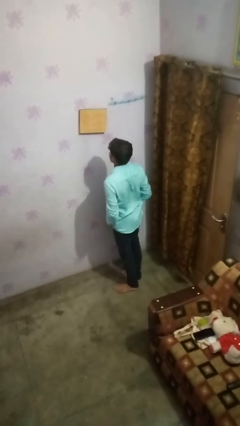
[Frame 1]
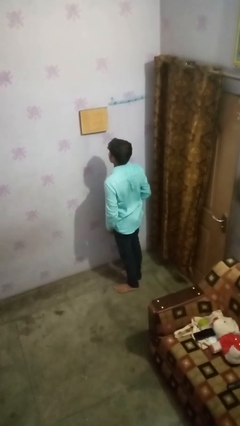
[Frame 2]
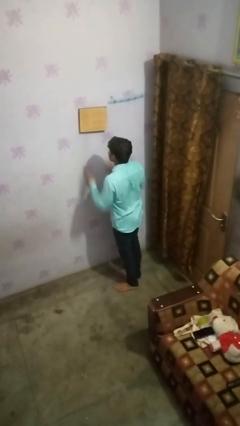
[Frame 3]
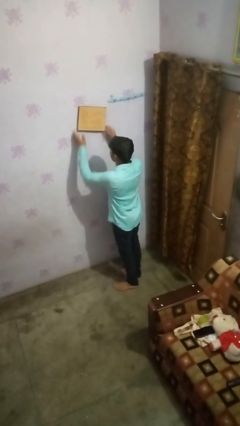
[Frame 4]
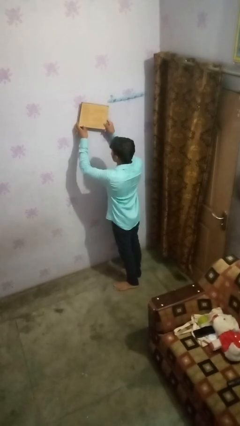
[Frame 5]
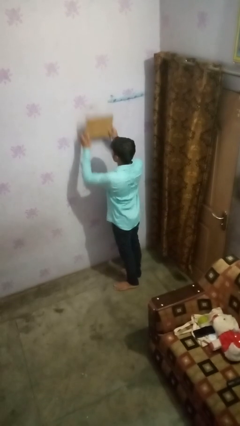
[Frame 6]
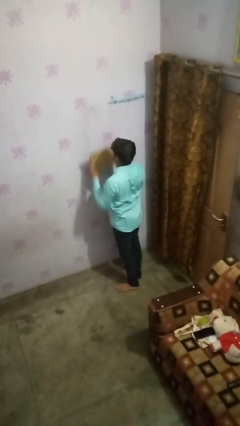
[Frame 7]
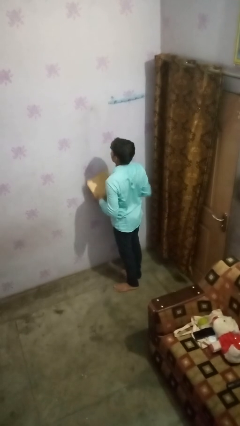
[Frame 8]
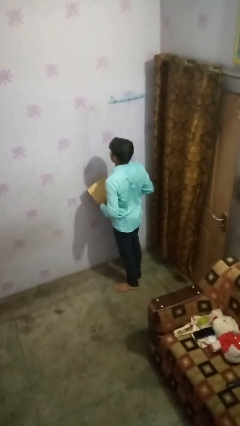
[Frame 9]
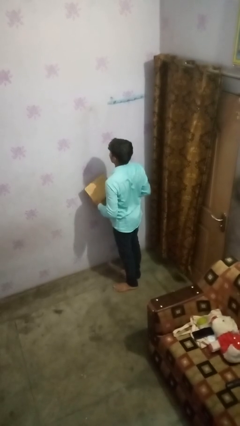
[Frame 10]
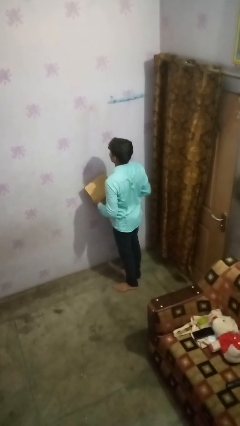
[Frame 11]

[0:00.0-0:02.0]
person takes down picture frame

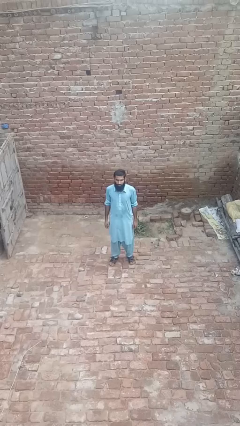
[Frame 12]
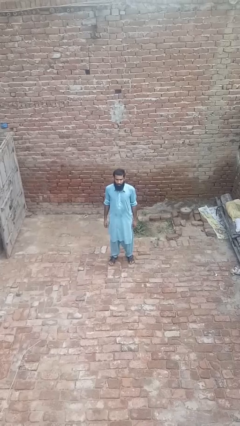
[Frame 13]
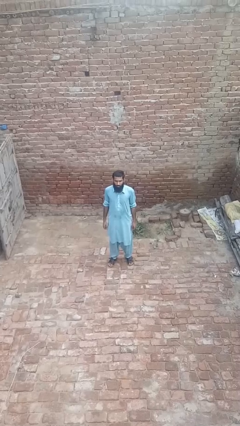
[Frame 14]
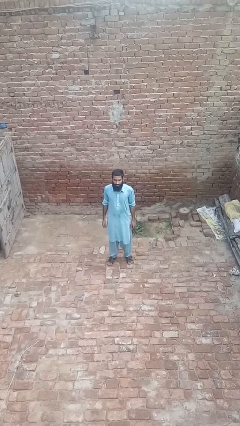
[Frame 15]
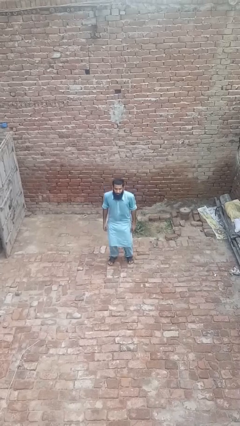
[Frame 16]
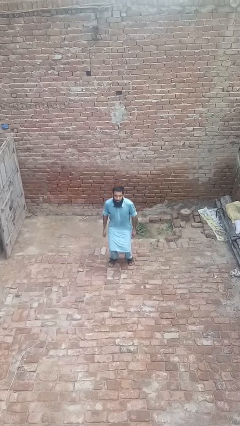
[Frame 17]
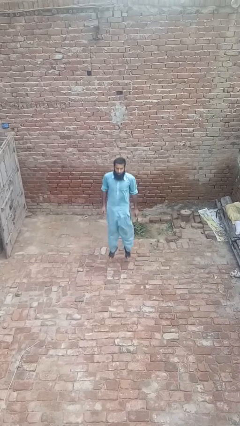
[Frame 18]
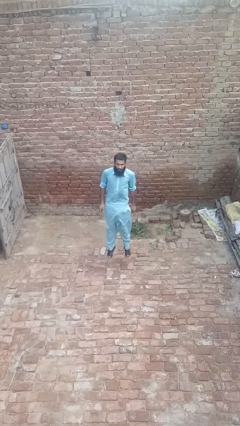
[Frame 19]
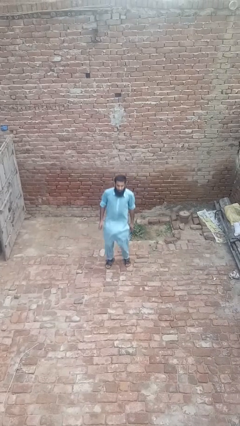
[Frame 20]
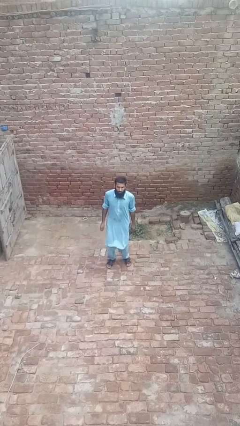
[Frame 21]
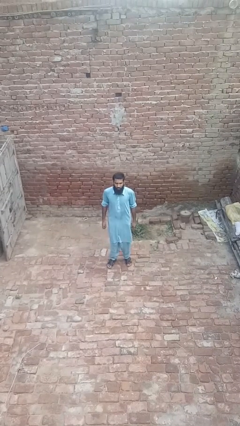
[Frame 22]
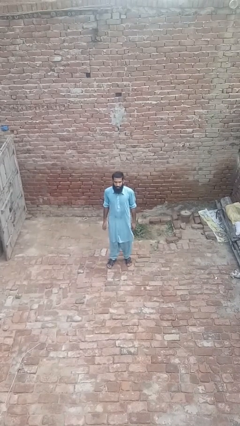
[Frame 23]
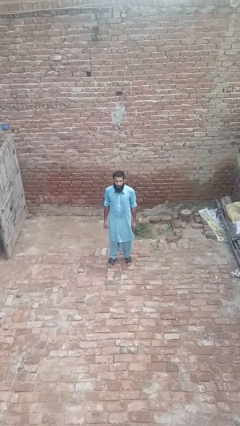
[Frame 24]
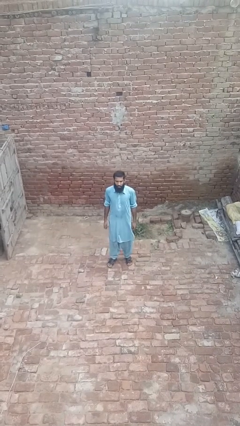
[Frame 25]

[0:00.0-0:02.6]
person jumps

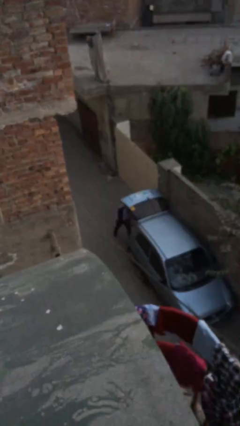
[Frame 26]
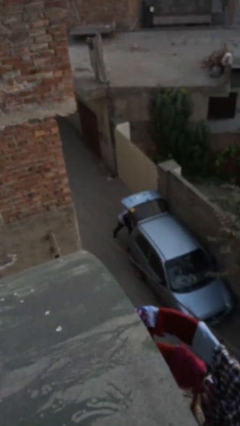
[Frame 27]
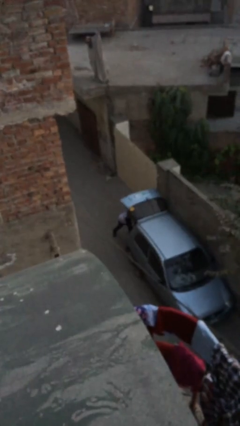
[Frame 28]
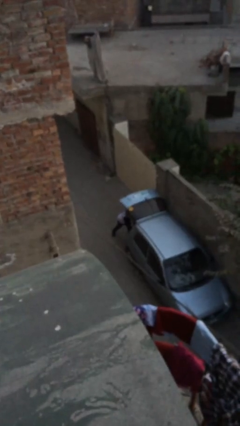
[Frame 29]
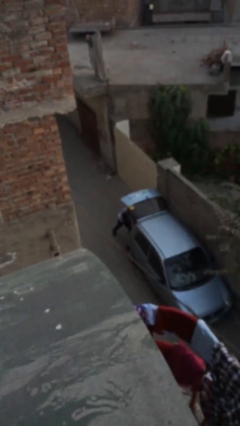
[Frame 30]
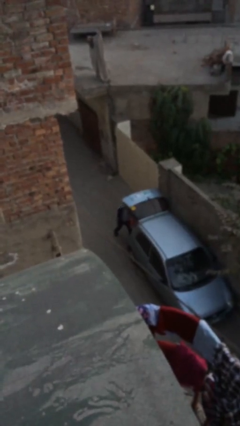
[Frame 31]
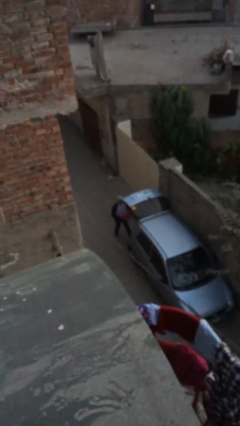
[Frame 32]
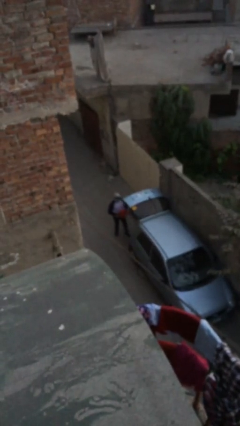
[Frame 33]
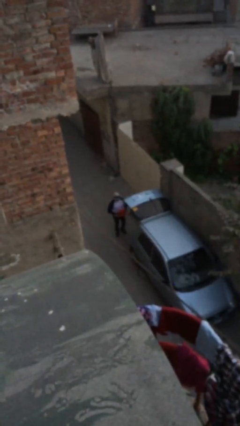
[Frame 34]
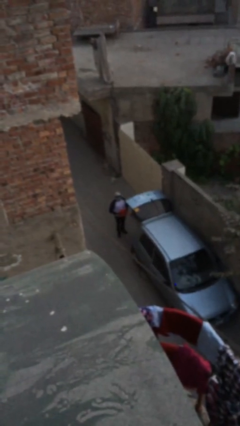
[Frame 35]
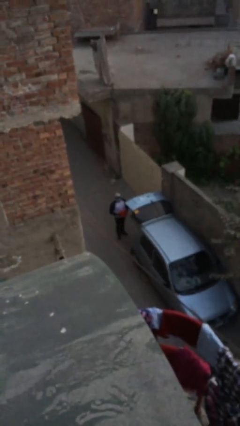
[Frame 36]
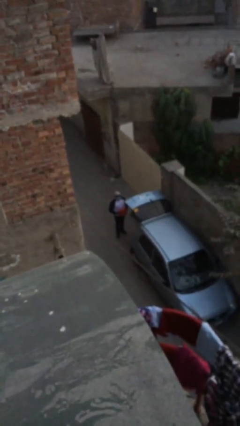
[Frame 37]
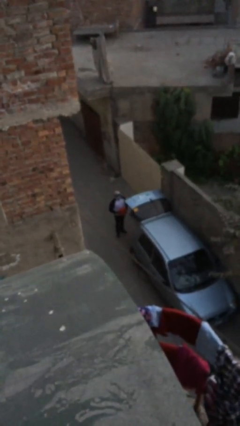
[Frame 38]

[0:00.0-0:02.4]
person unloads car

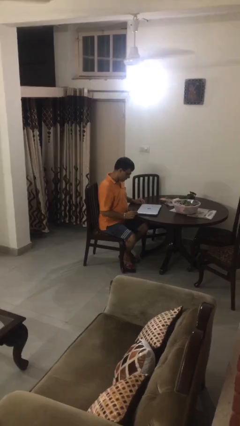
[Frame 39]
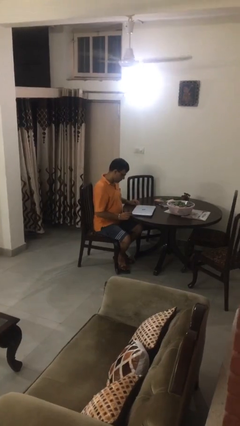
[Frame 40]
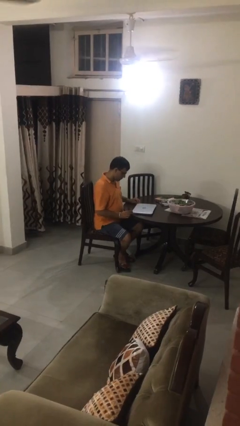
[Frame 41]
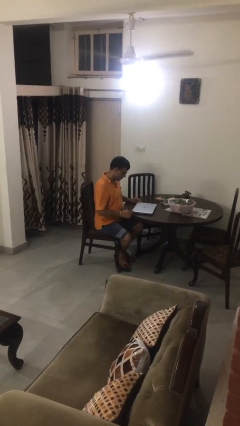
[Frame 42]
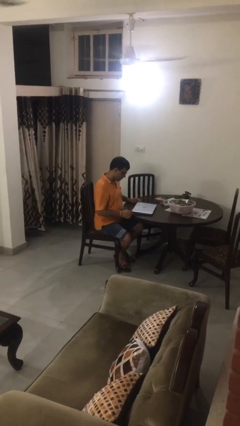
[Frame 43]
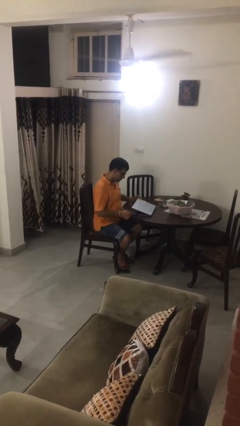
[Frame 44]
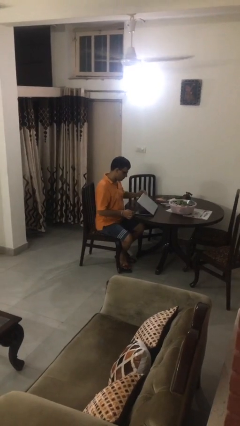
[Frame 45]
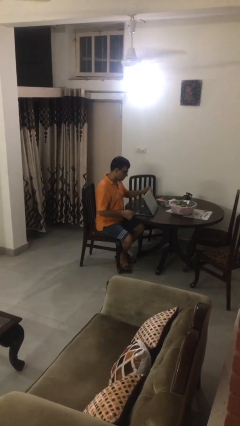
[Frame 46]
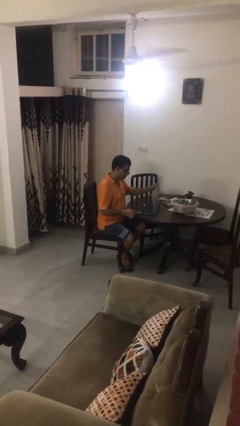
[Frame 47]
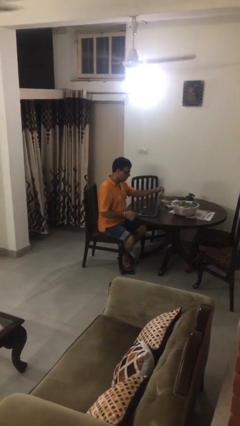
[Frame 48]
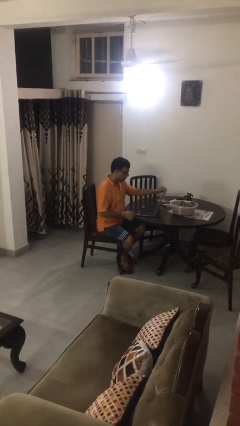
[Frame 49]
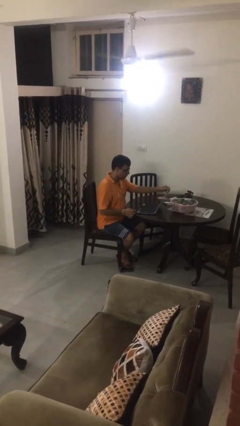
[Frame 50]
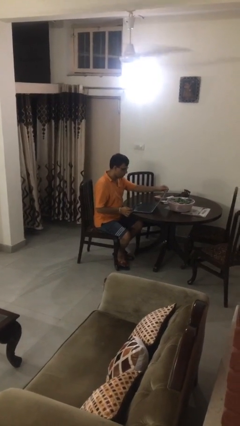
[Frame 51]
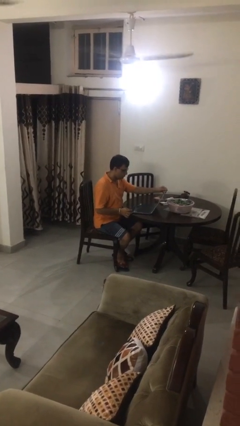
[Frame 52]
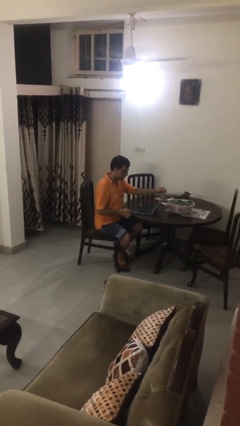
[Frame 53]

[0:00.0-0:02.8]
person opens laptop

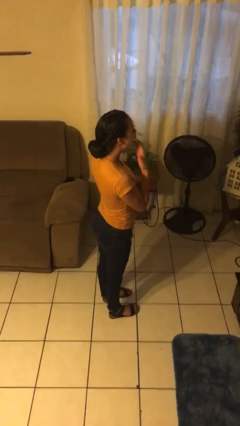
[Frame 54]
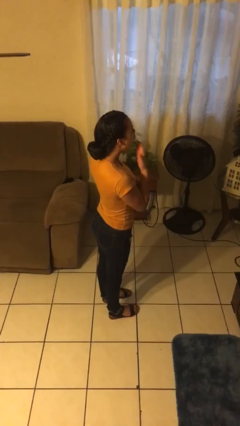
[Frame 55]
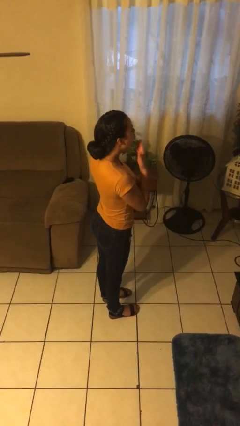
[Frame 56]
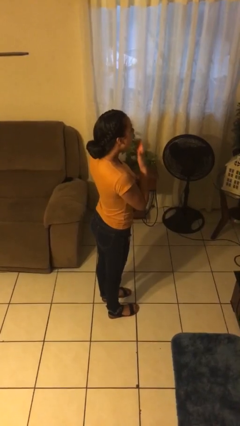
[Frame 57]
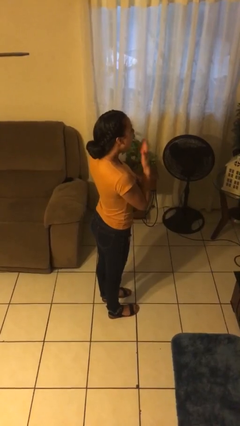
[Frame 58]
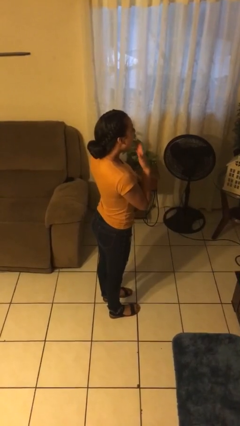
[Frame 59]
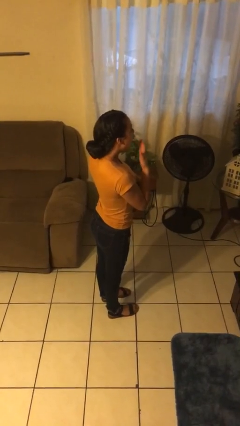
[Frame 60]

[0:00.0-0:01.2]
person yawns

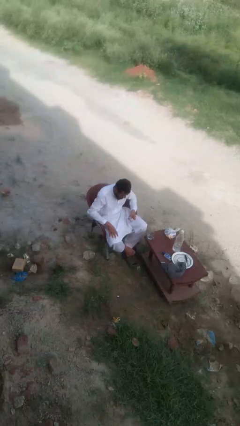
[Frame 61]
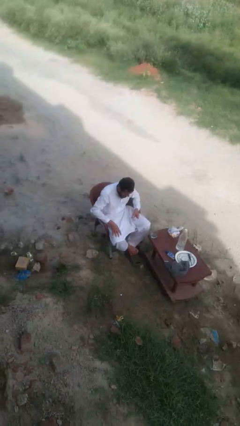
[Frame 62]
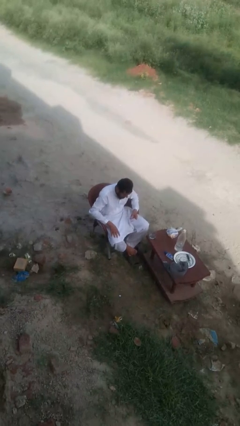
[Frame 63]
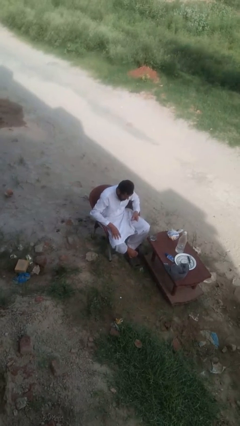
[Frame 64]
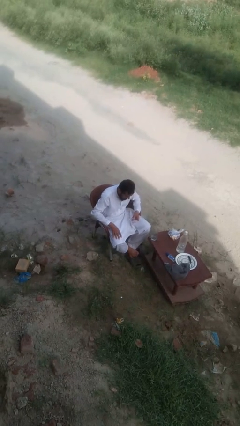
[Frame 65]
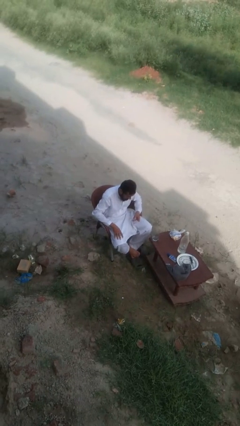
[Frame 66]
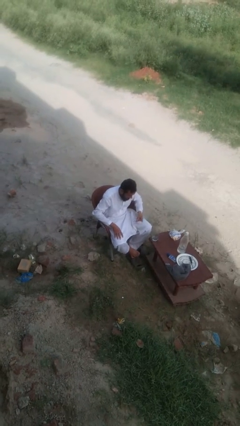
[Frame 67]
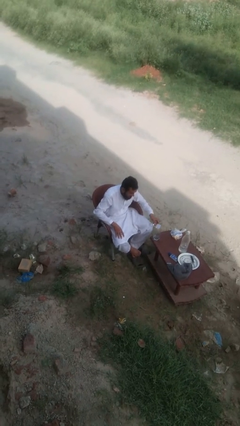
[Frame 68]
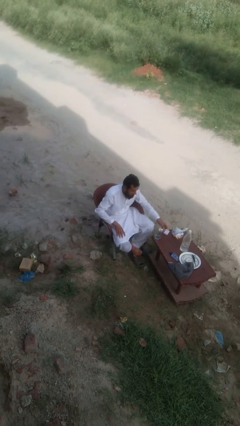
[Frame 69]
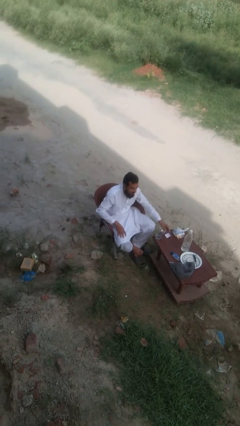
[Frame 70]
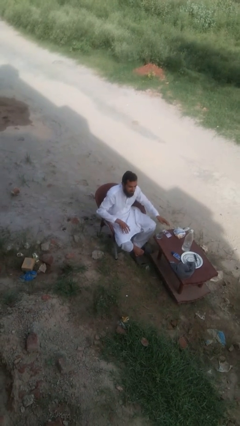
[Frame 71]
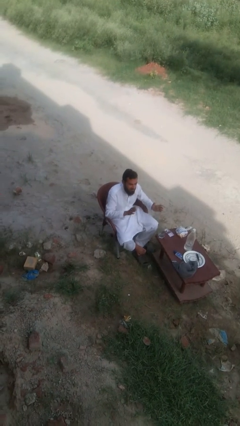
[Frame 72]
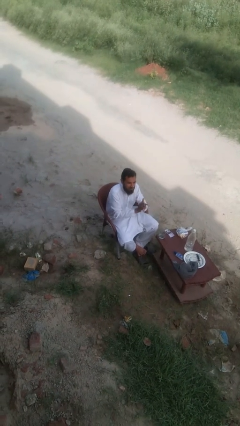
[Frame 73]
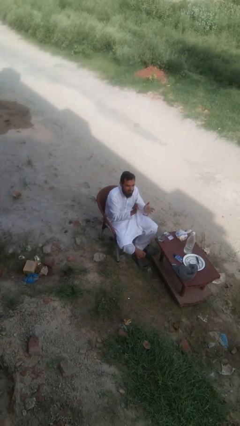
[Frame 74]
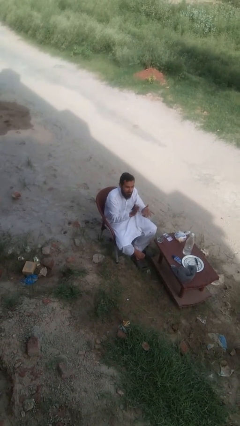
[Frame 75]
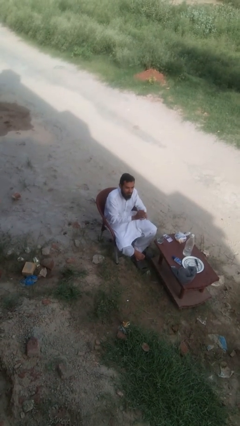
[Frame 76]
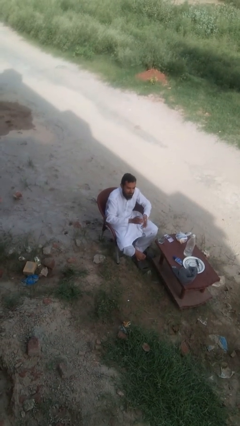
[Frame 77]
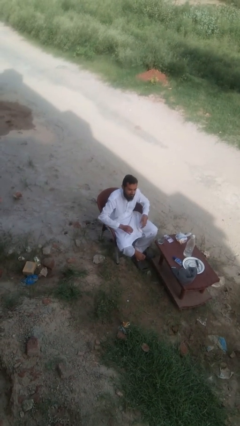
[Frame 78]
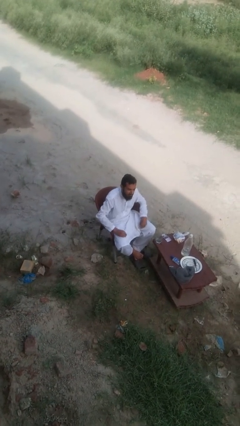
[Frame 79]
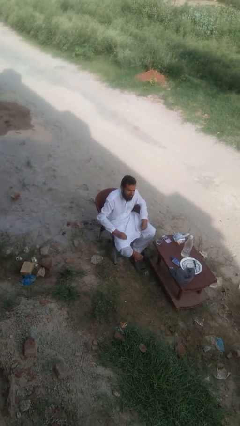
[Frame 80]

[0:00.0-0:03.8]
person claps hands

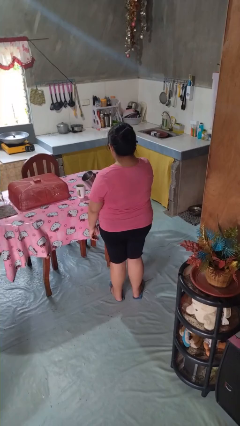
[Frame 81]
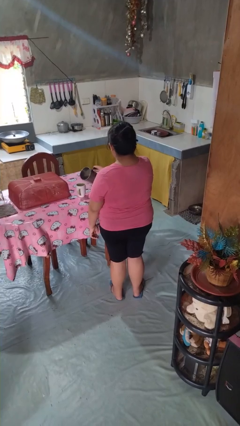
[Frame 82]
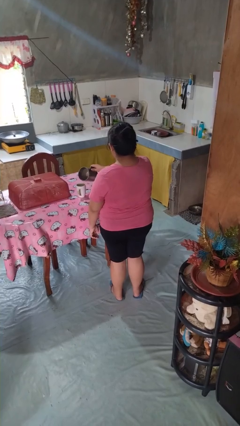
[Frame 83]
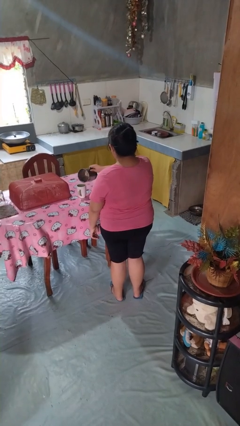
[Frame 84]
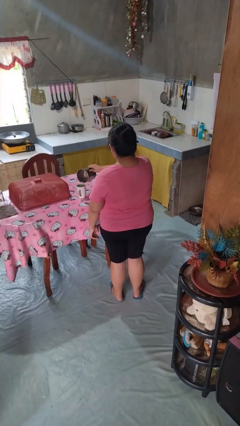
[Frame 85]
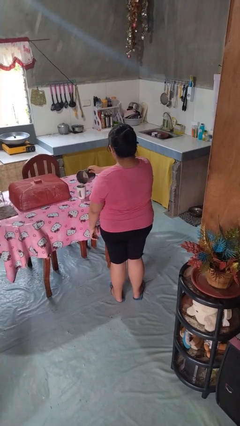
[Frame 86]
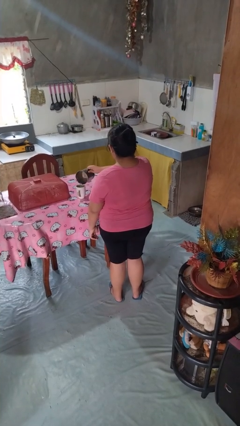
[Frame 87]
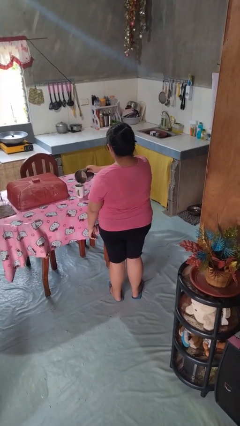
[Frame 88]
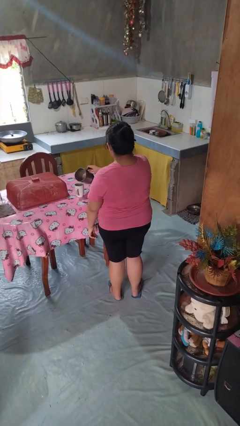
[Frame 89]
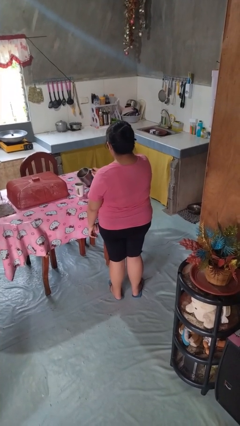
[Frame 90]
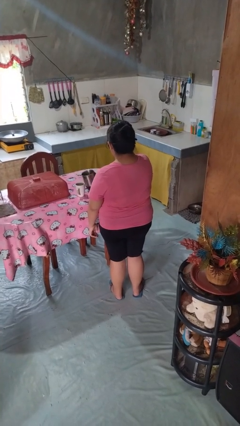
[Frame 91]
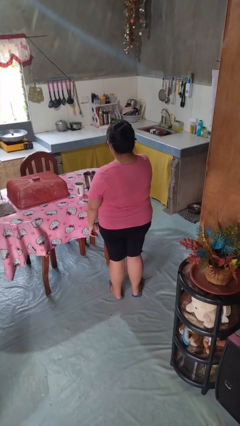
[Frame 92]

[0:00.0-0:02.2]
person pours coffee into mug
